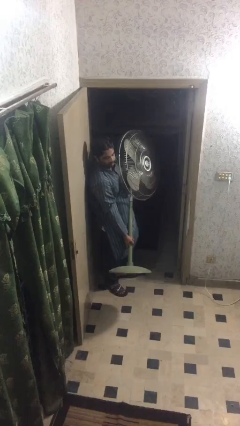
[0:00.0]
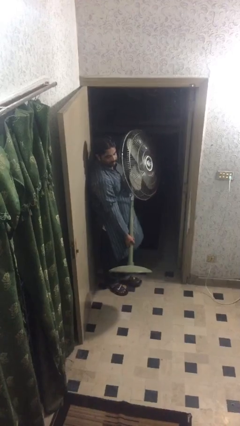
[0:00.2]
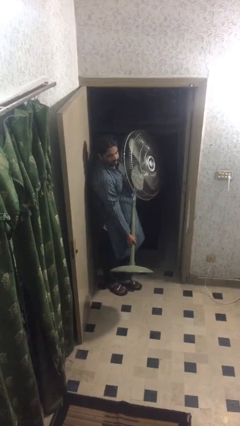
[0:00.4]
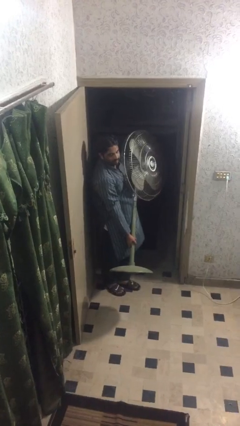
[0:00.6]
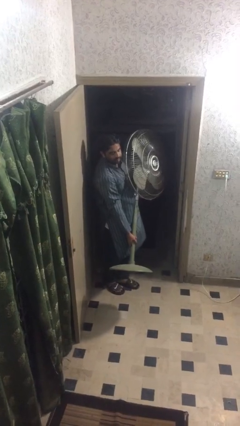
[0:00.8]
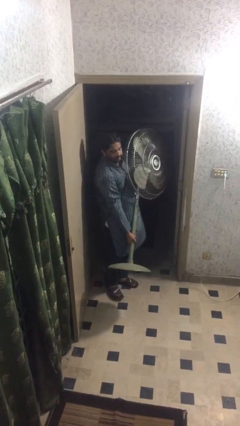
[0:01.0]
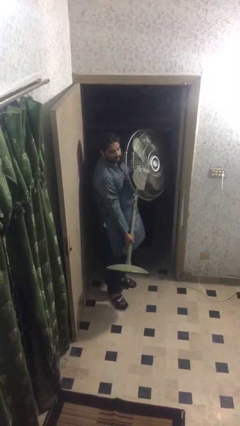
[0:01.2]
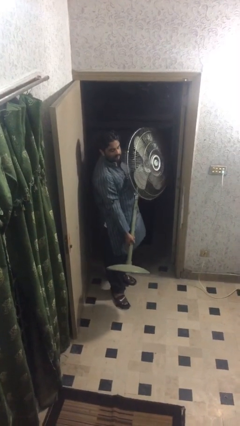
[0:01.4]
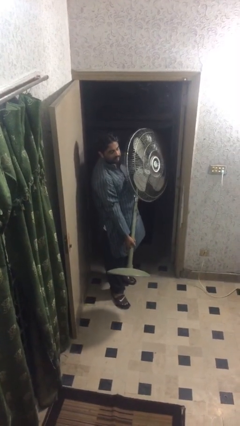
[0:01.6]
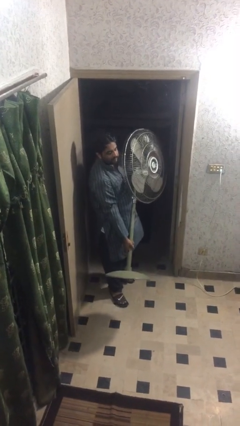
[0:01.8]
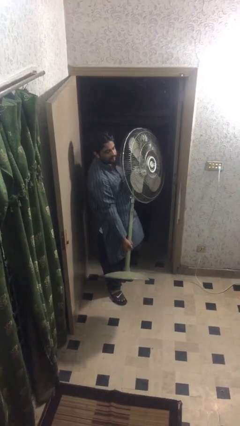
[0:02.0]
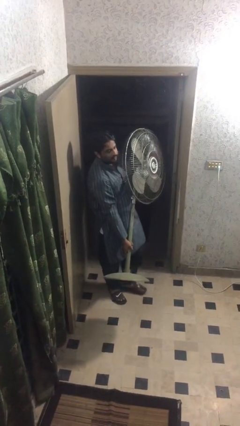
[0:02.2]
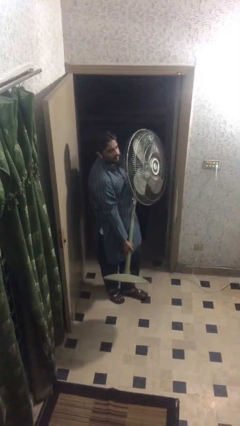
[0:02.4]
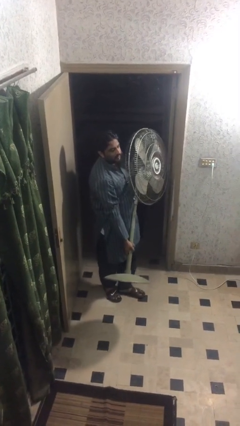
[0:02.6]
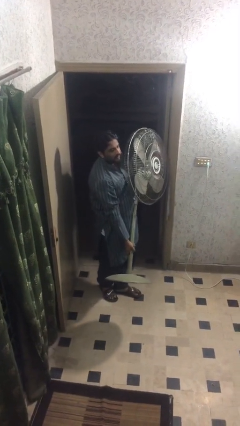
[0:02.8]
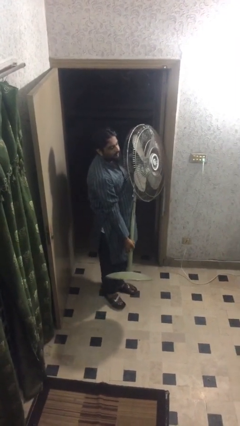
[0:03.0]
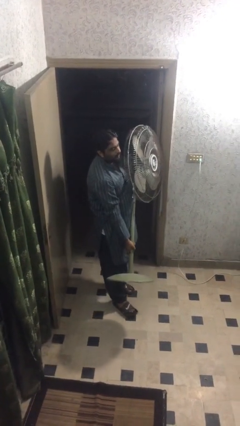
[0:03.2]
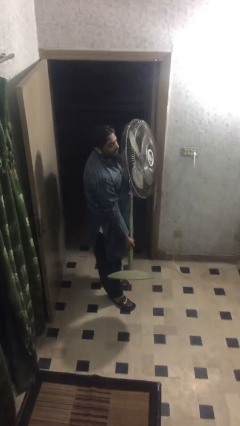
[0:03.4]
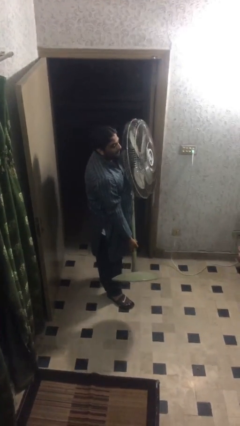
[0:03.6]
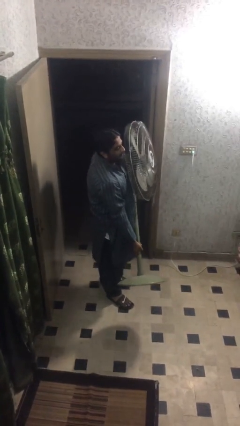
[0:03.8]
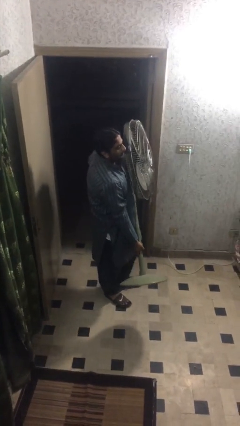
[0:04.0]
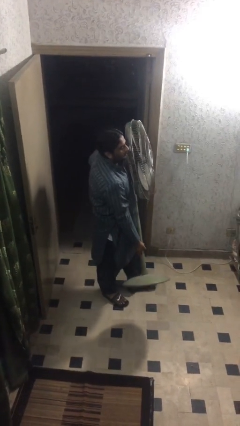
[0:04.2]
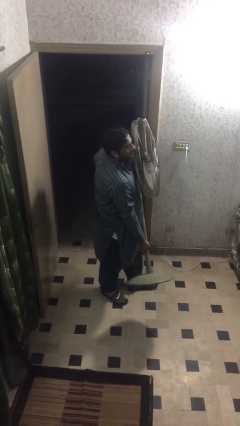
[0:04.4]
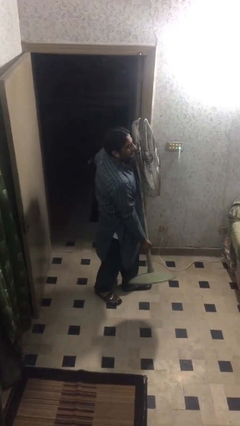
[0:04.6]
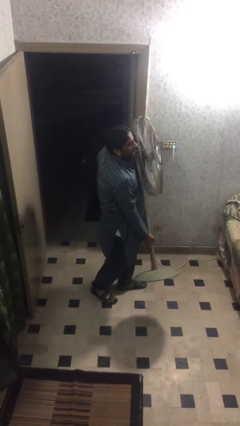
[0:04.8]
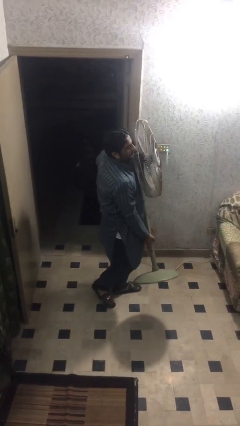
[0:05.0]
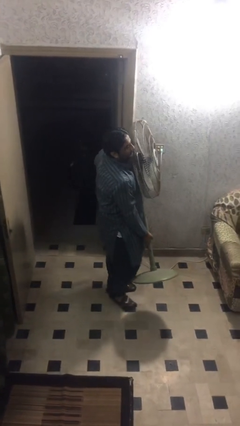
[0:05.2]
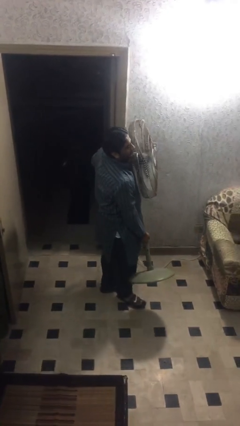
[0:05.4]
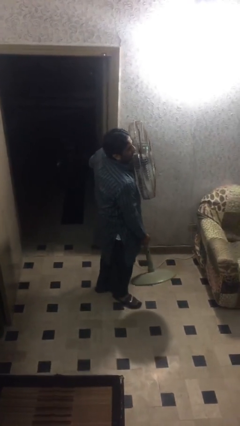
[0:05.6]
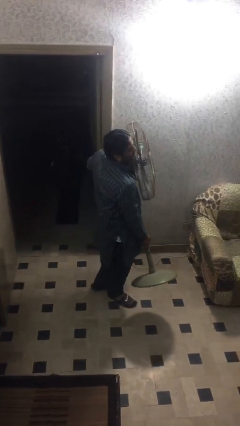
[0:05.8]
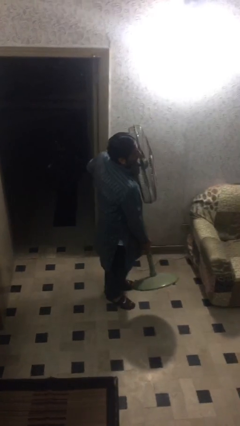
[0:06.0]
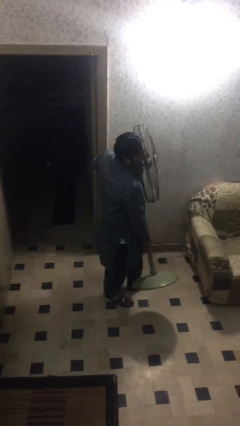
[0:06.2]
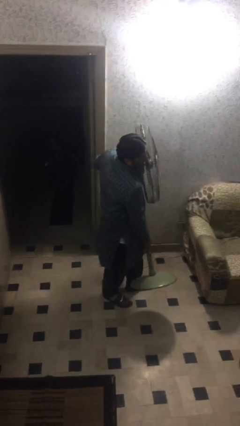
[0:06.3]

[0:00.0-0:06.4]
person carries heavy object

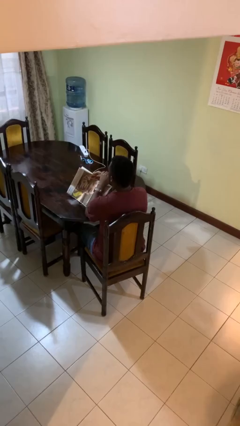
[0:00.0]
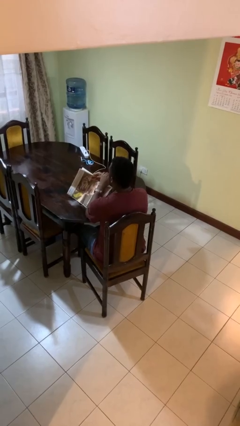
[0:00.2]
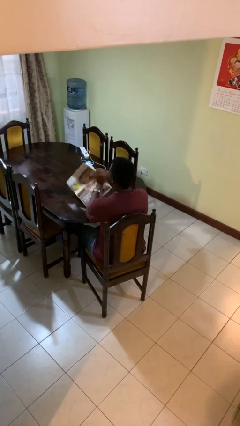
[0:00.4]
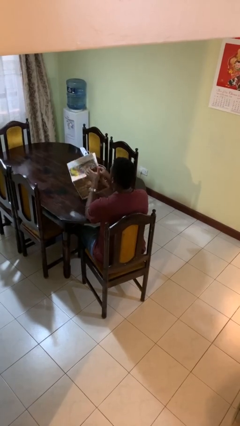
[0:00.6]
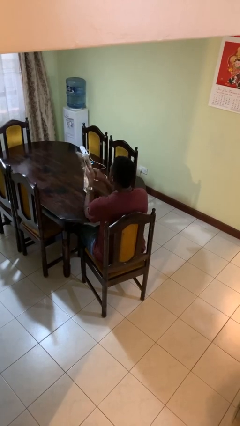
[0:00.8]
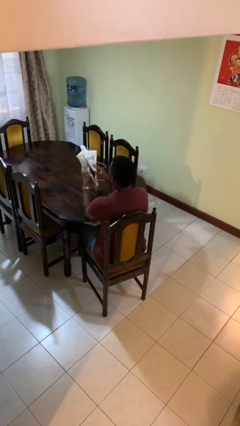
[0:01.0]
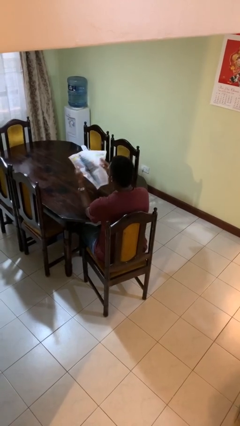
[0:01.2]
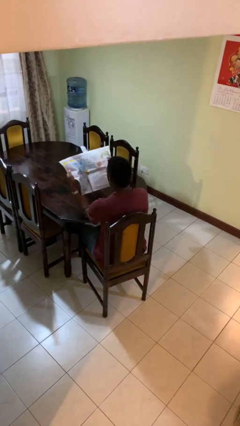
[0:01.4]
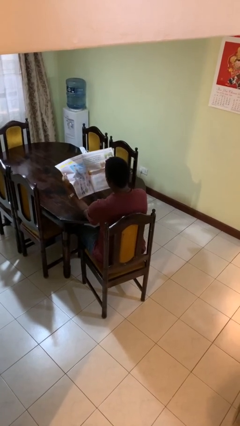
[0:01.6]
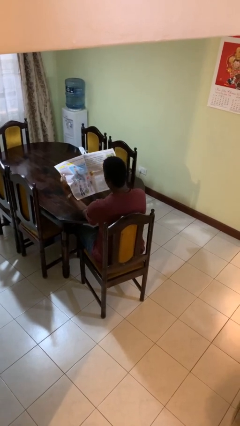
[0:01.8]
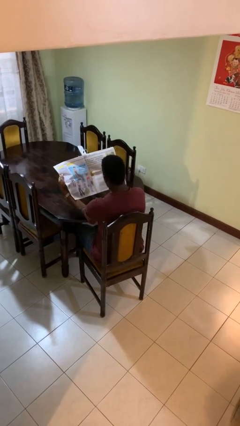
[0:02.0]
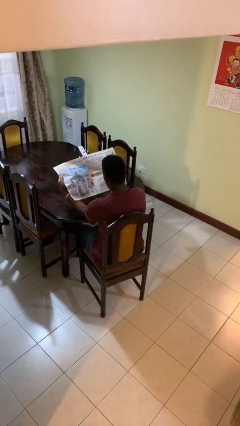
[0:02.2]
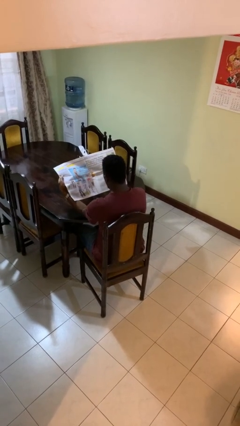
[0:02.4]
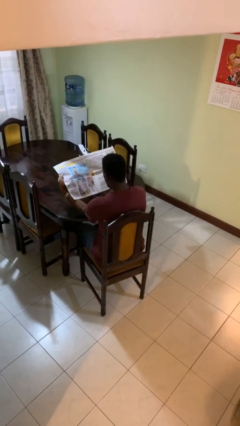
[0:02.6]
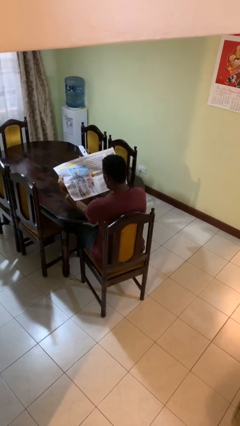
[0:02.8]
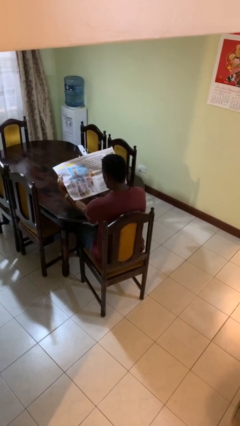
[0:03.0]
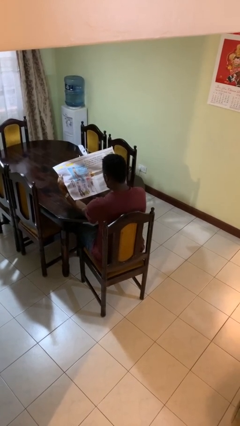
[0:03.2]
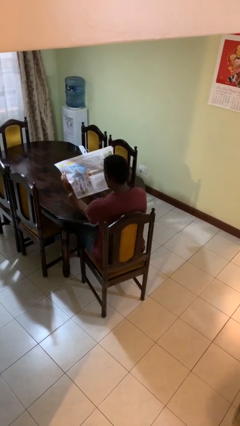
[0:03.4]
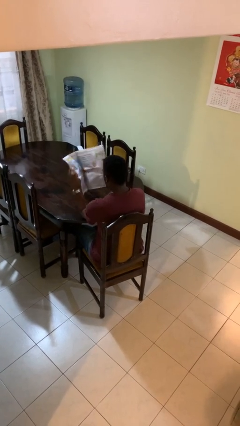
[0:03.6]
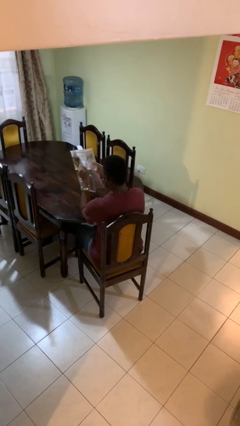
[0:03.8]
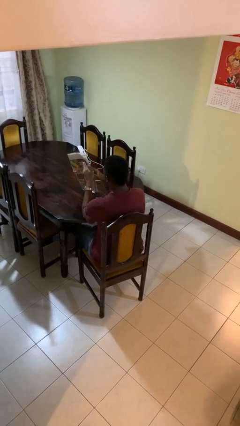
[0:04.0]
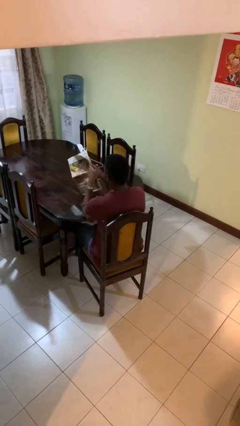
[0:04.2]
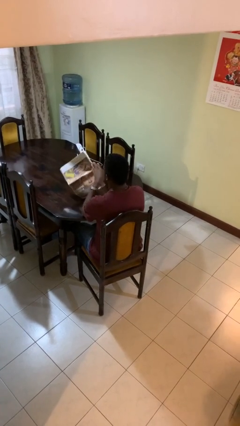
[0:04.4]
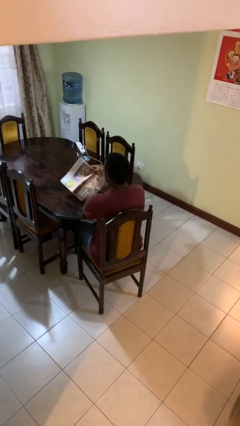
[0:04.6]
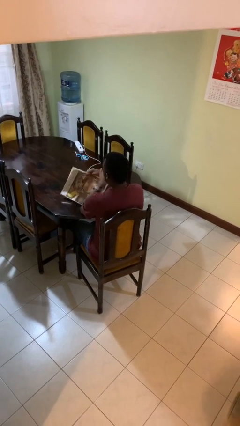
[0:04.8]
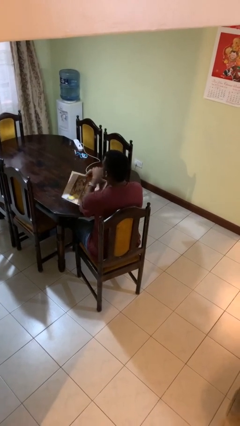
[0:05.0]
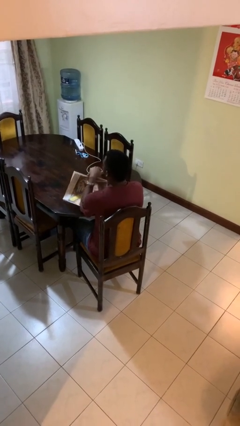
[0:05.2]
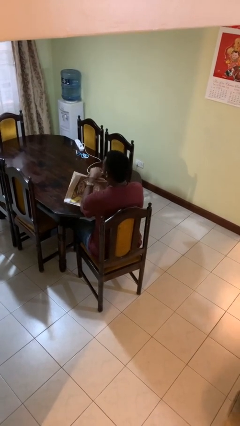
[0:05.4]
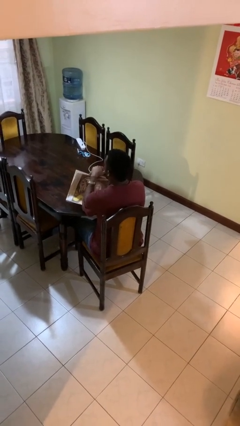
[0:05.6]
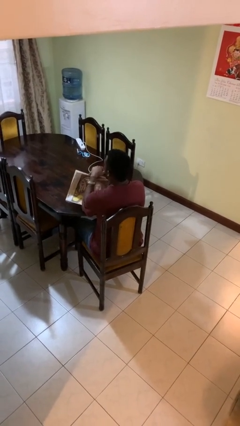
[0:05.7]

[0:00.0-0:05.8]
person reads newspaper

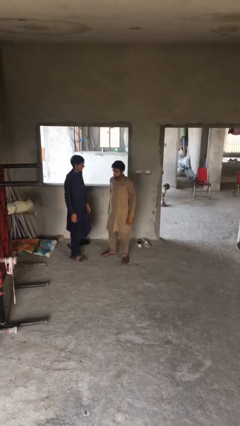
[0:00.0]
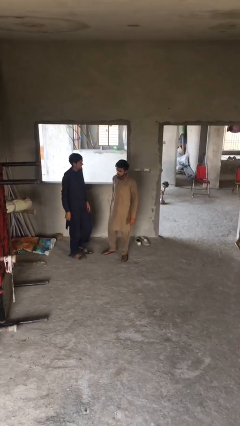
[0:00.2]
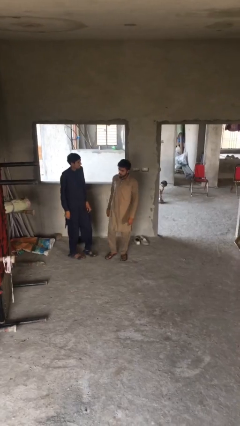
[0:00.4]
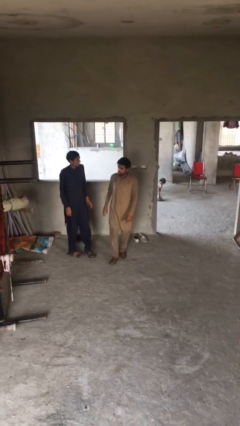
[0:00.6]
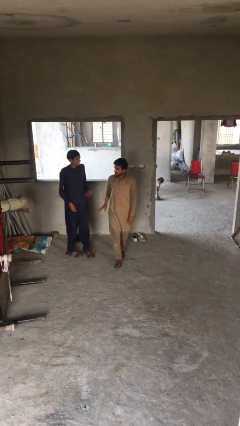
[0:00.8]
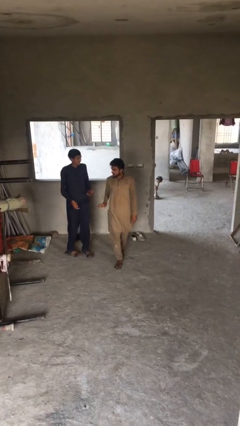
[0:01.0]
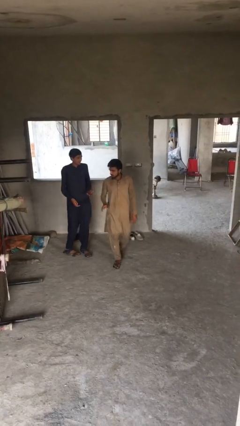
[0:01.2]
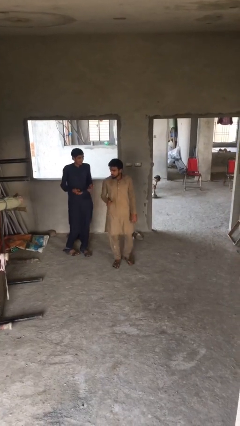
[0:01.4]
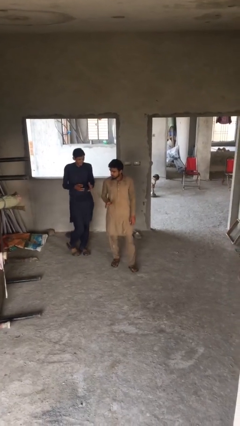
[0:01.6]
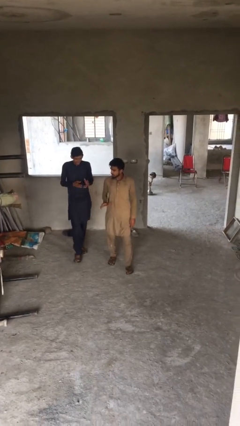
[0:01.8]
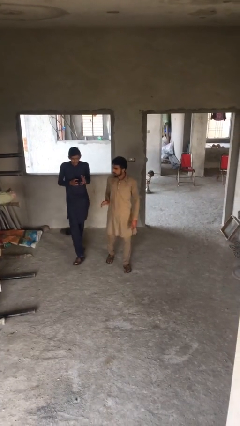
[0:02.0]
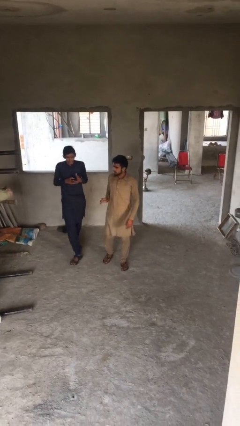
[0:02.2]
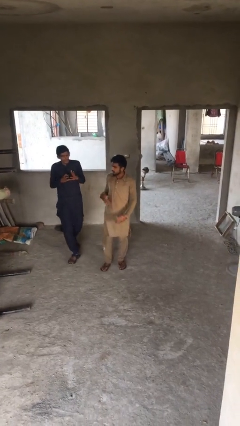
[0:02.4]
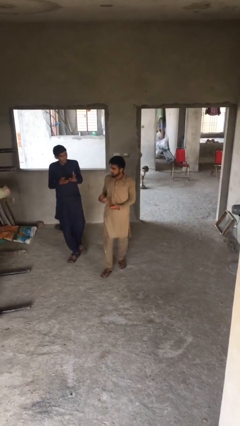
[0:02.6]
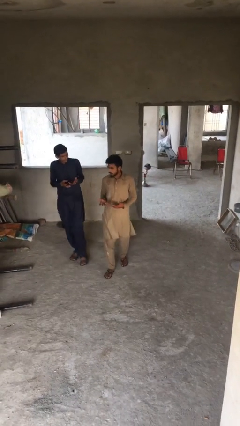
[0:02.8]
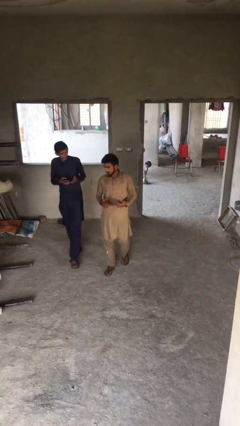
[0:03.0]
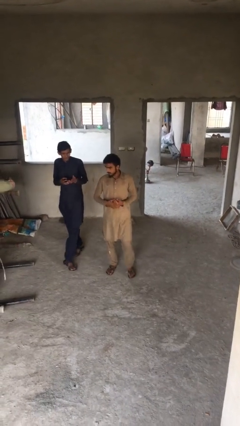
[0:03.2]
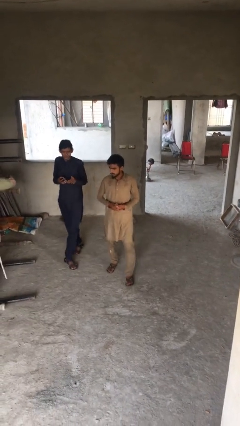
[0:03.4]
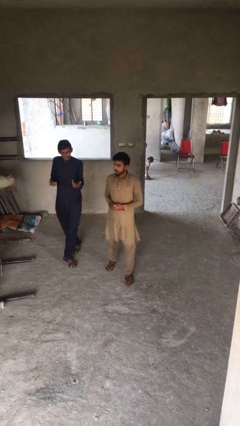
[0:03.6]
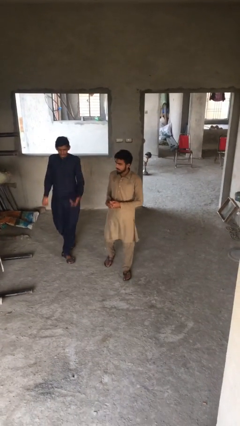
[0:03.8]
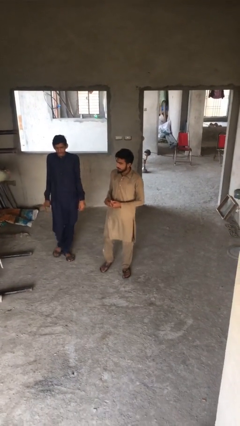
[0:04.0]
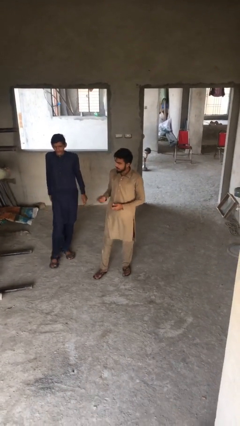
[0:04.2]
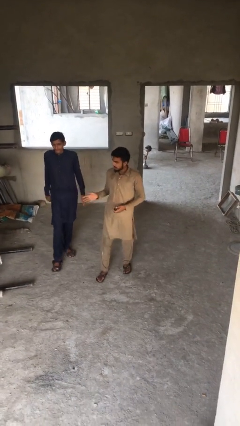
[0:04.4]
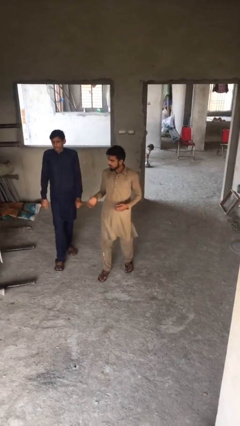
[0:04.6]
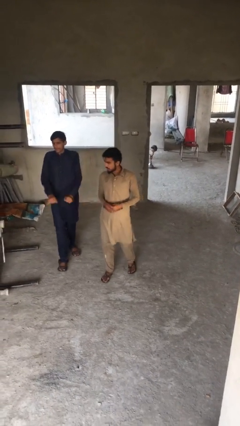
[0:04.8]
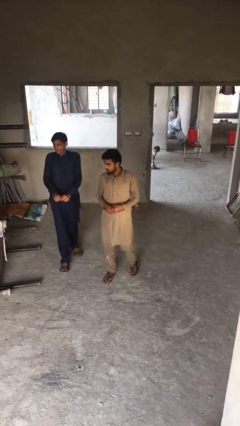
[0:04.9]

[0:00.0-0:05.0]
person talks to person

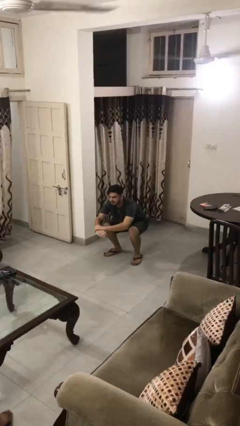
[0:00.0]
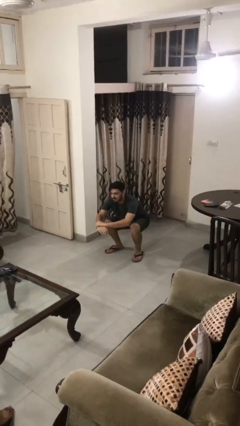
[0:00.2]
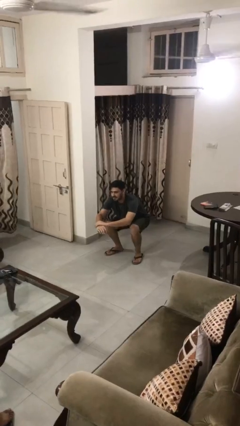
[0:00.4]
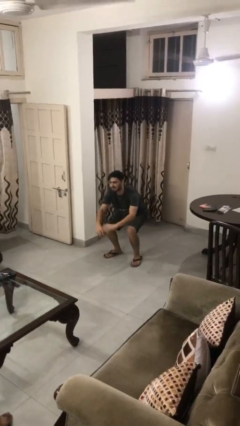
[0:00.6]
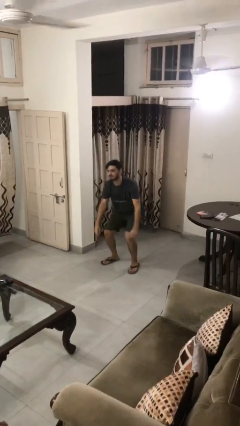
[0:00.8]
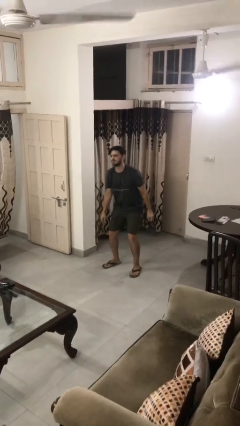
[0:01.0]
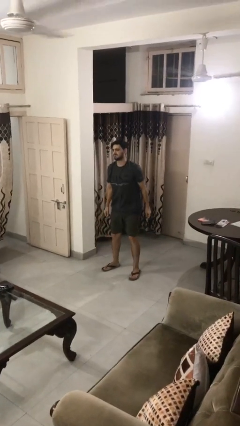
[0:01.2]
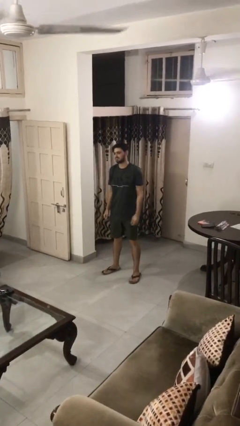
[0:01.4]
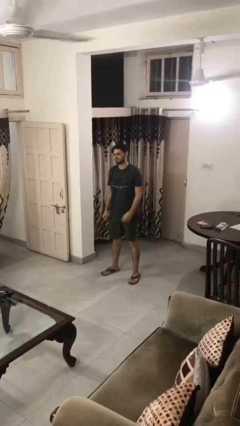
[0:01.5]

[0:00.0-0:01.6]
person stands up
